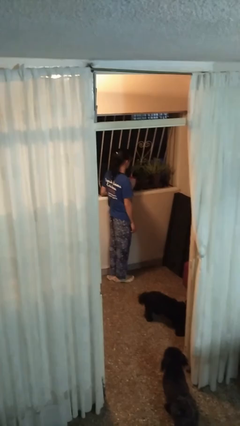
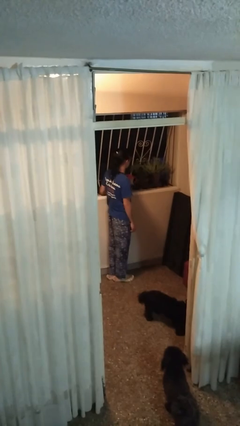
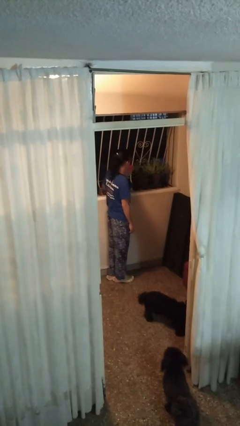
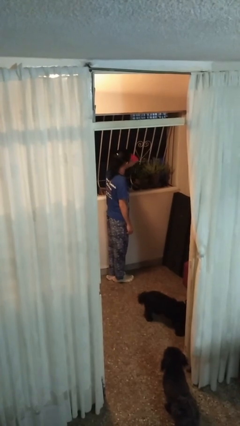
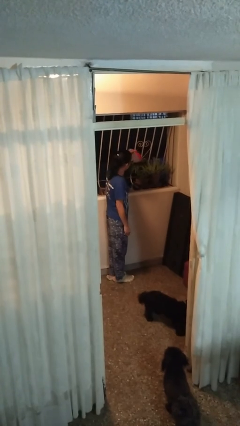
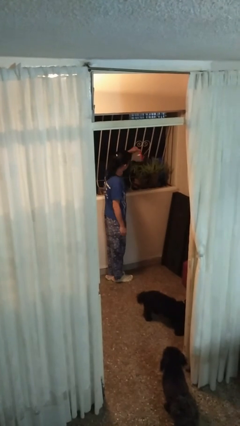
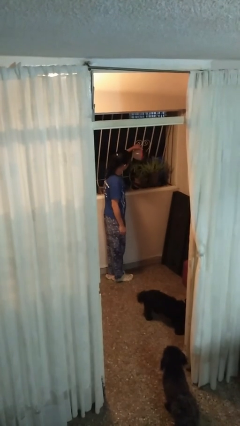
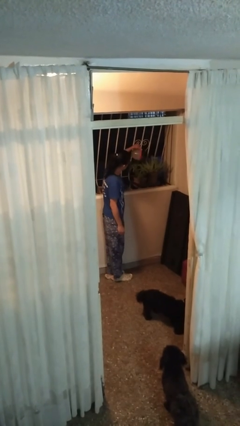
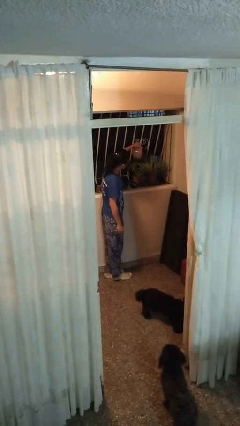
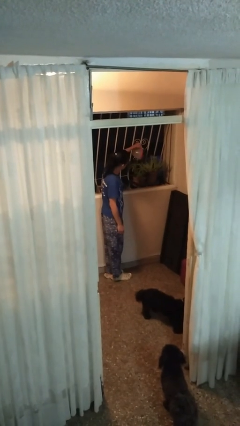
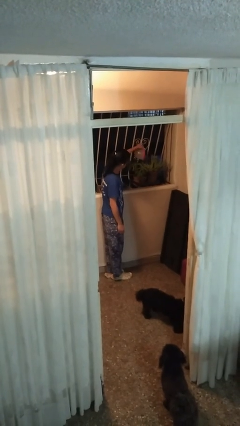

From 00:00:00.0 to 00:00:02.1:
person waters houseplant

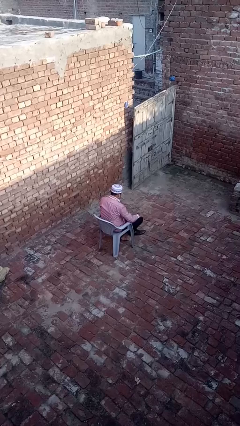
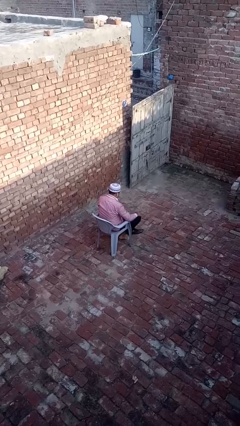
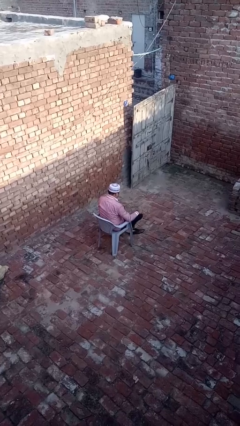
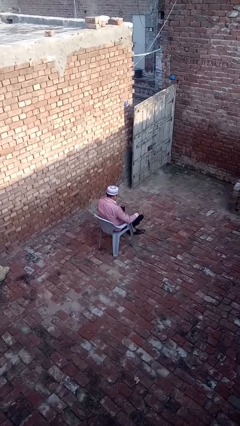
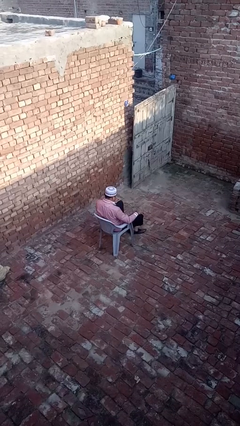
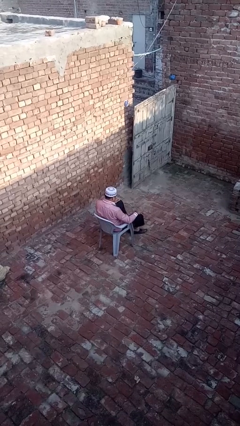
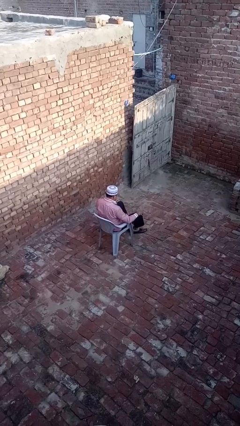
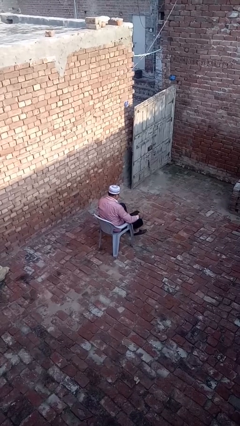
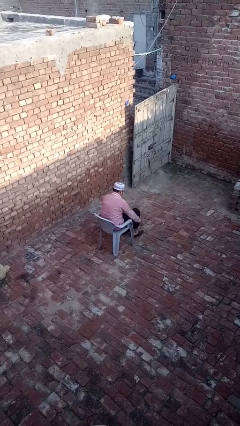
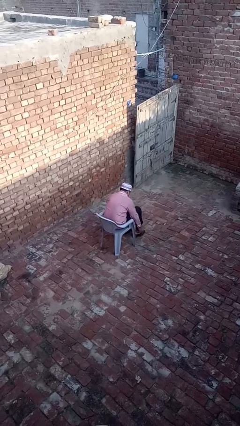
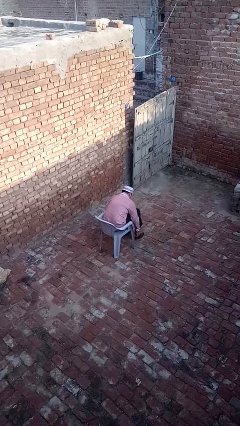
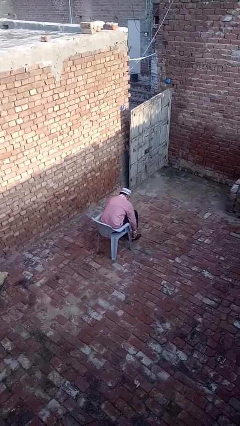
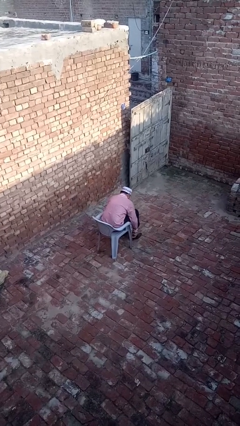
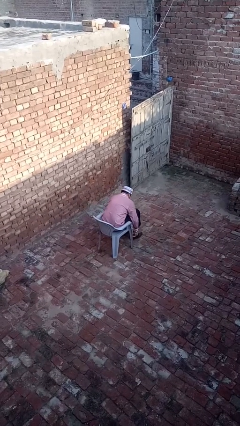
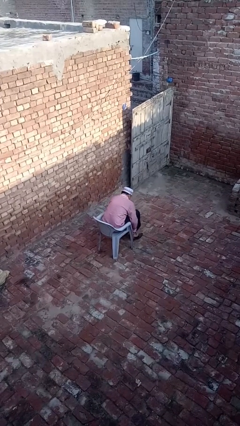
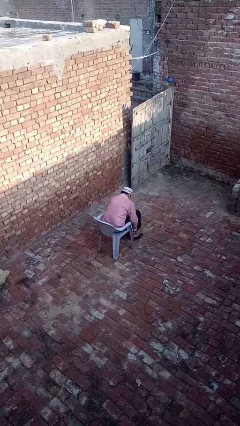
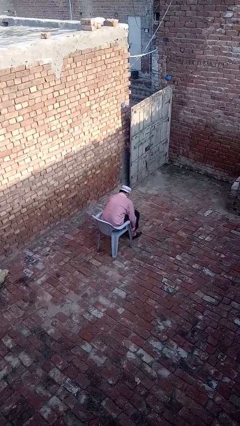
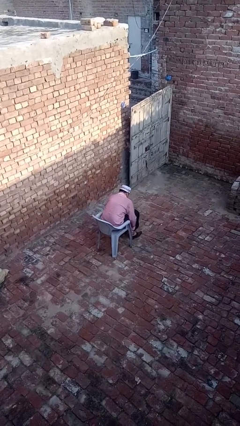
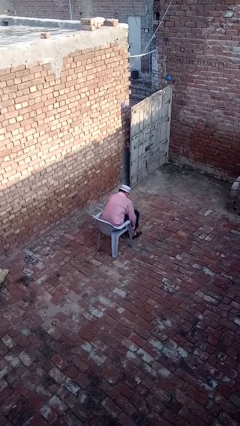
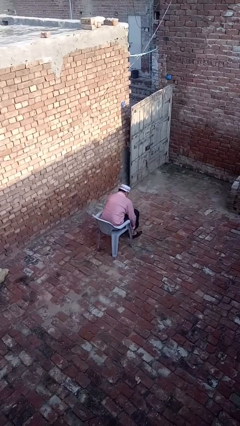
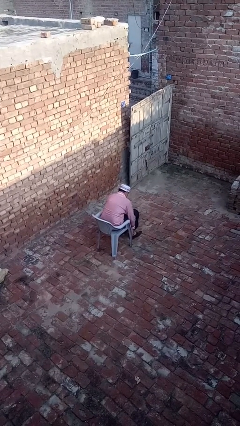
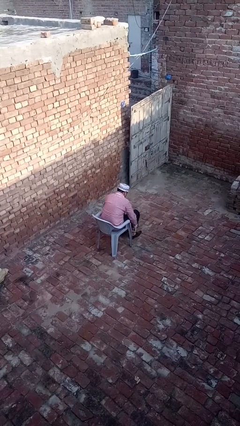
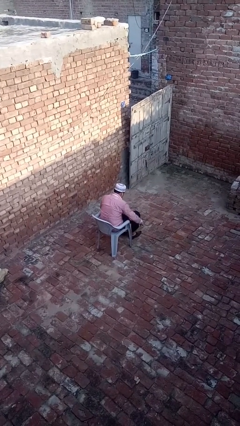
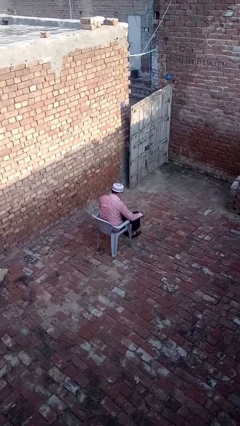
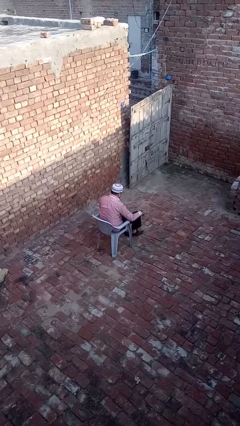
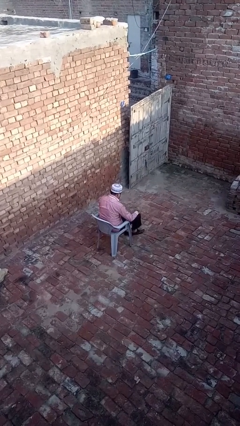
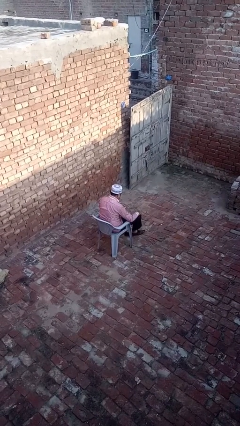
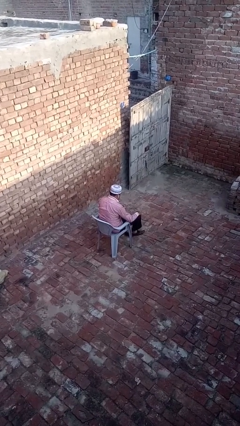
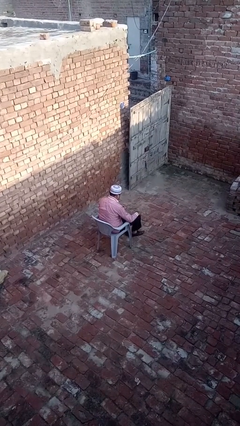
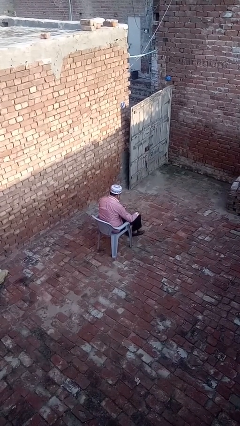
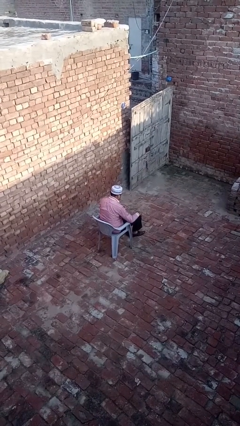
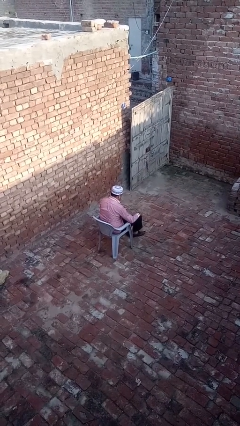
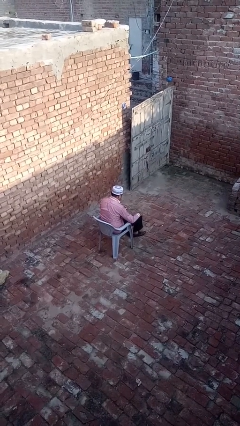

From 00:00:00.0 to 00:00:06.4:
person puts on shoes

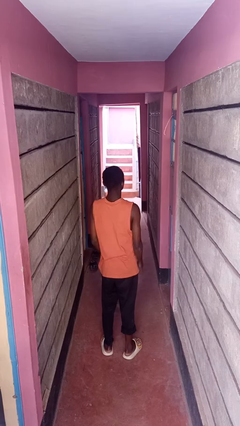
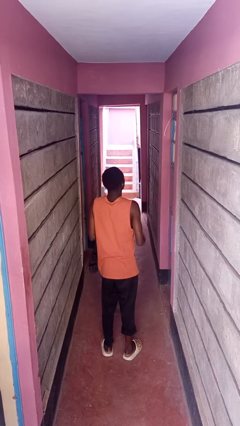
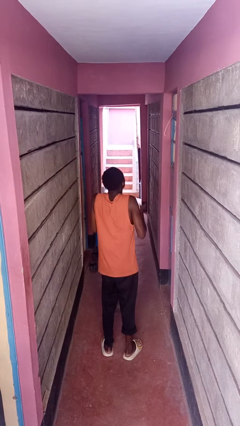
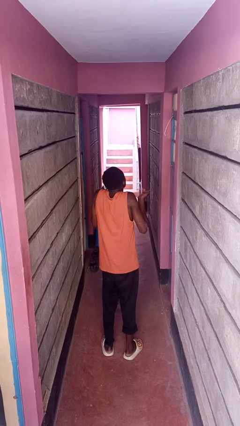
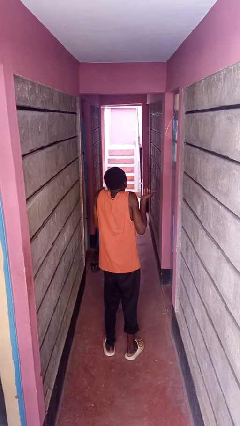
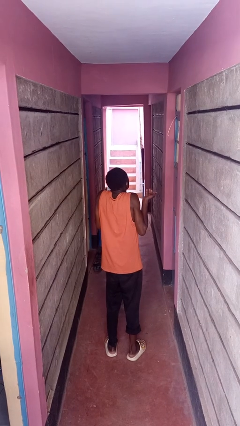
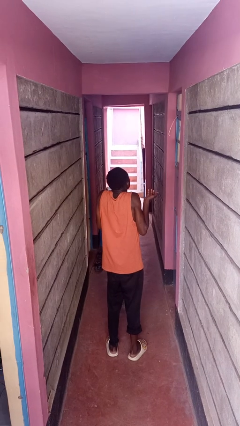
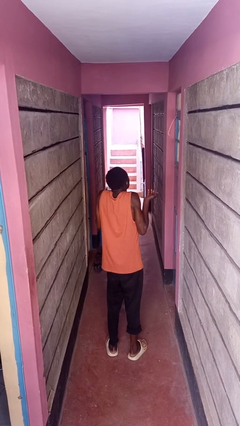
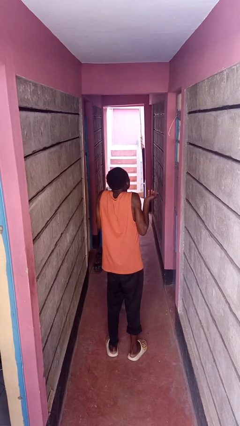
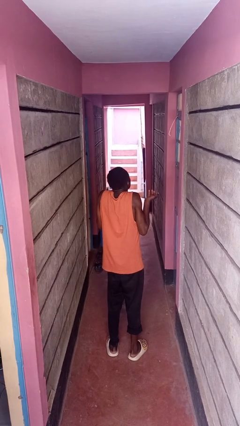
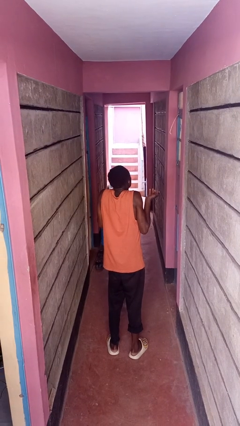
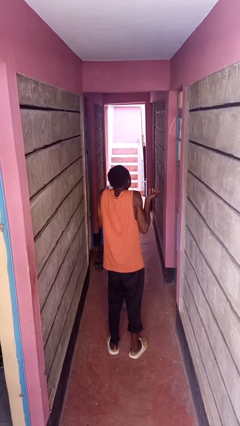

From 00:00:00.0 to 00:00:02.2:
person shrugs

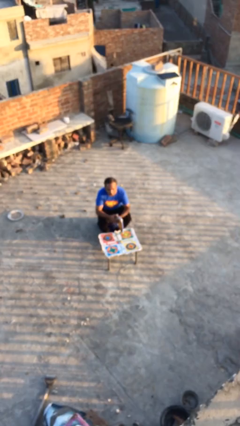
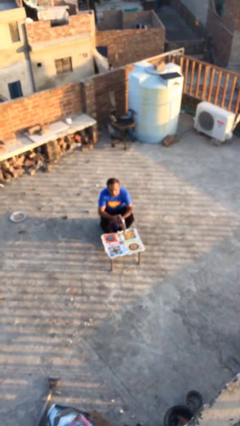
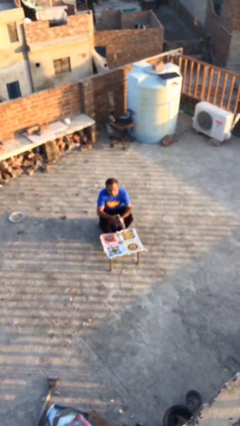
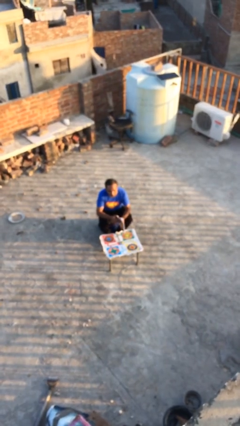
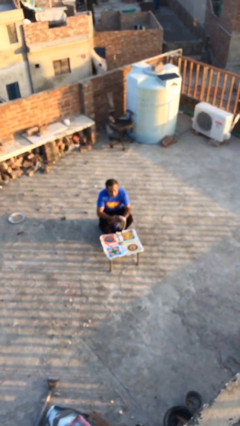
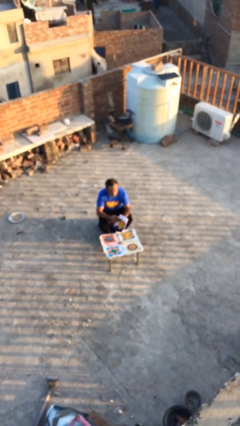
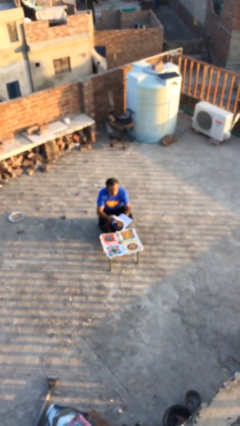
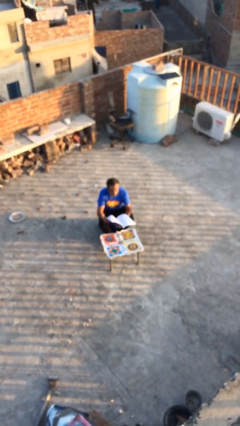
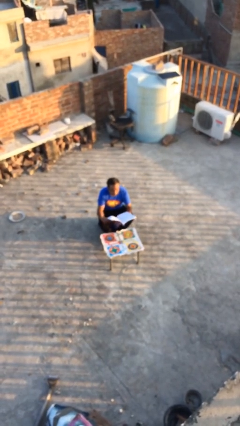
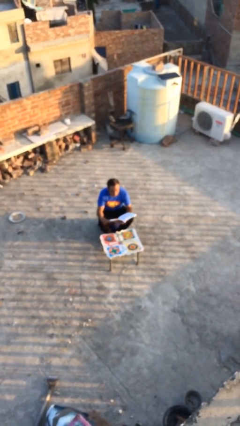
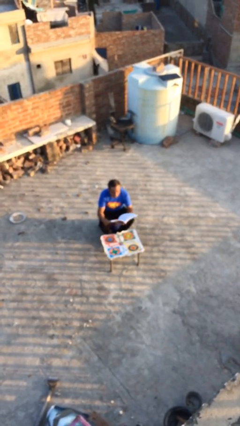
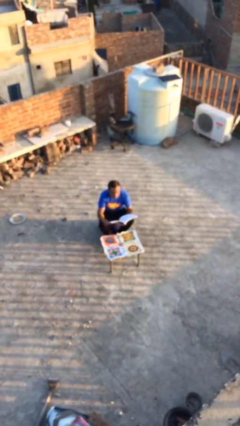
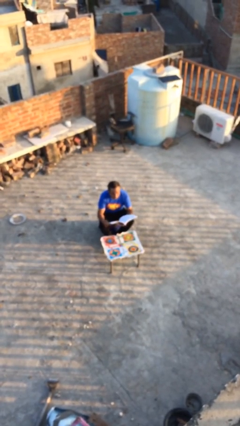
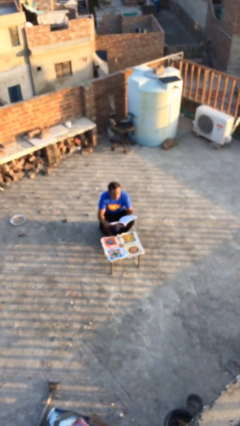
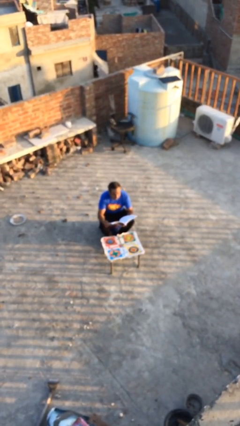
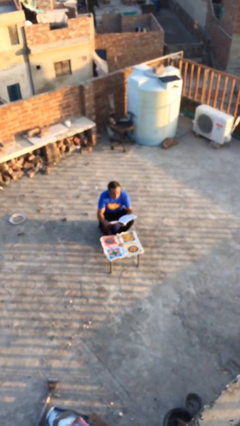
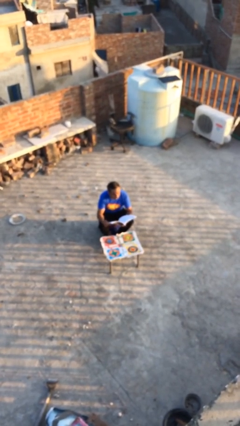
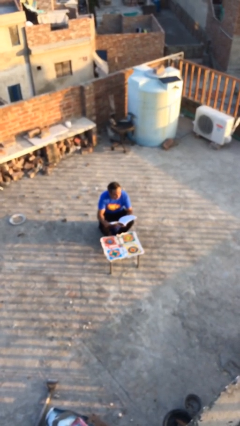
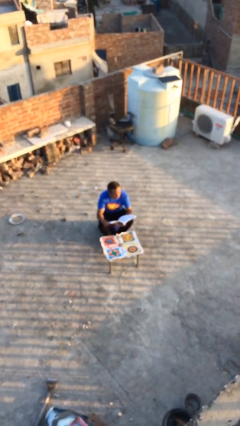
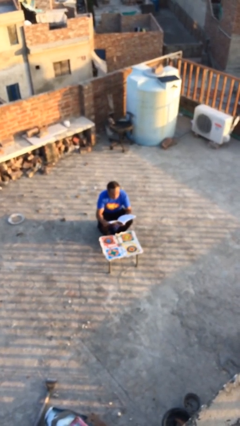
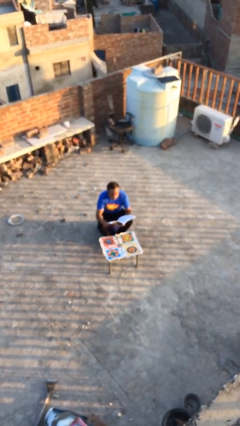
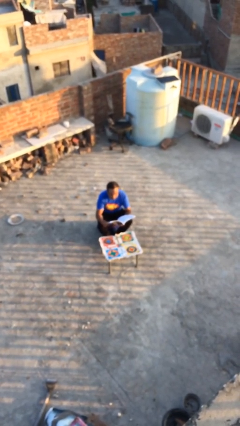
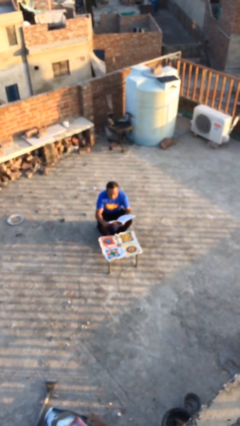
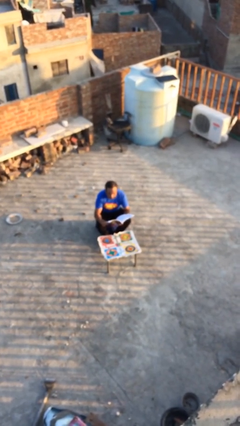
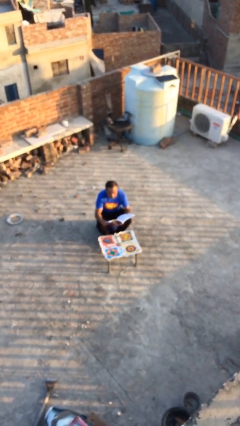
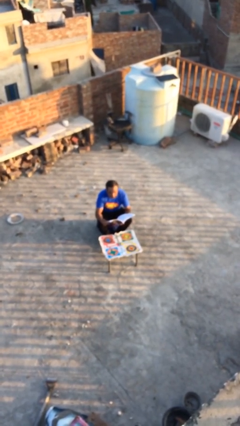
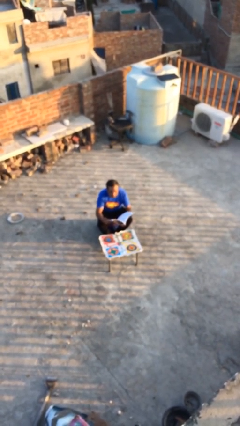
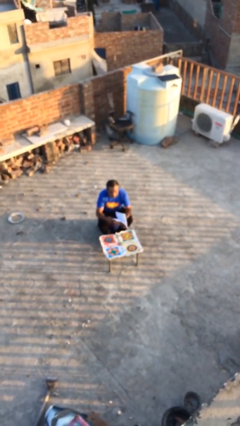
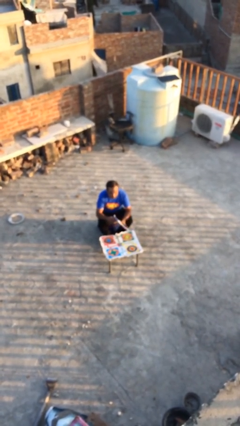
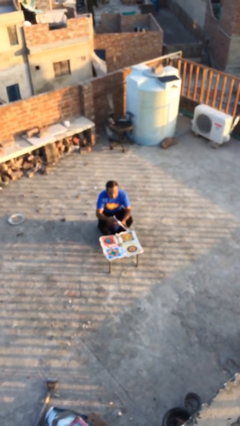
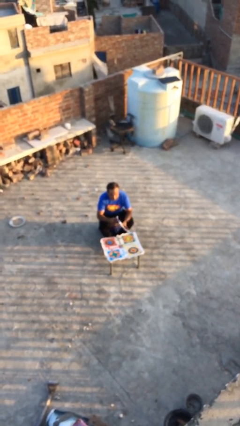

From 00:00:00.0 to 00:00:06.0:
person reads document

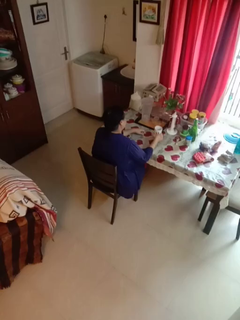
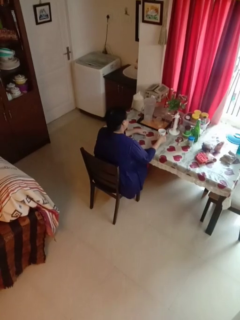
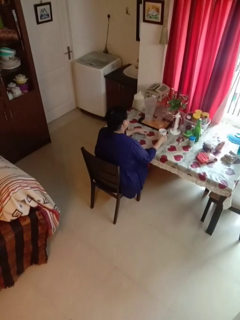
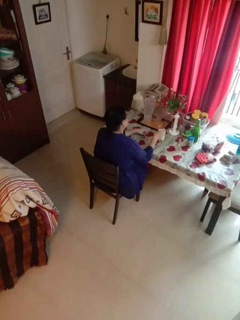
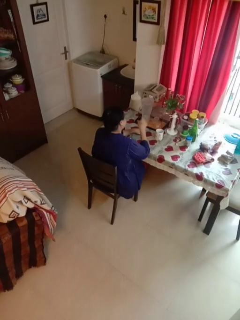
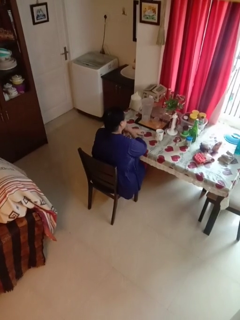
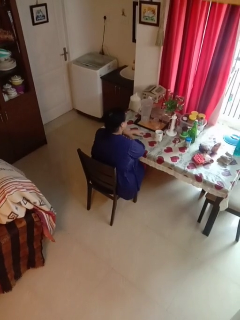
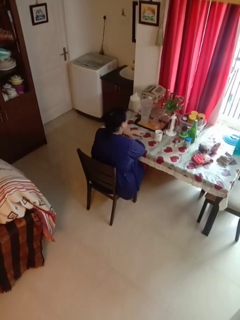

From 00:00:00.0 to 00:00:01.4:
person puts down object on table
